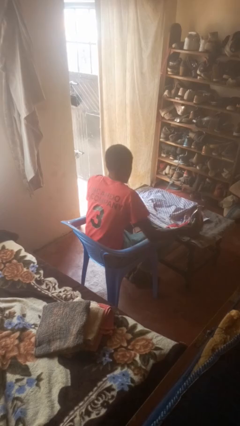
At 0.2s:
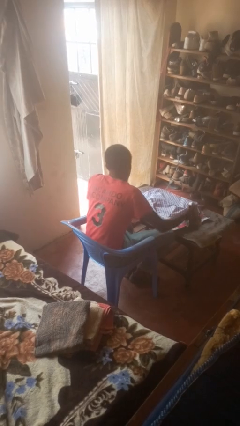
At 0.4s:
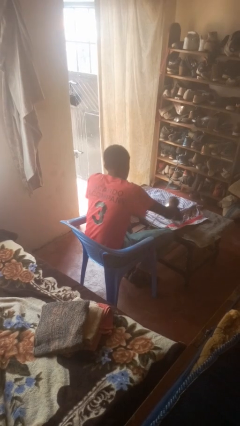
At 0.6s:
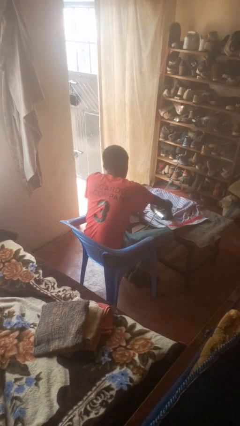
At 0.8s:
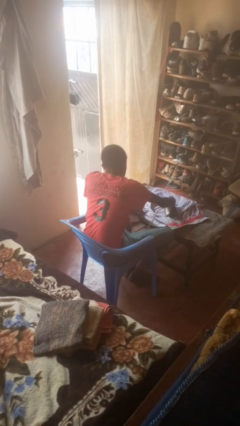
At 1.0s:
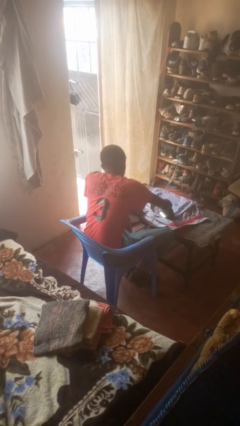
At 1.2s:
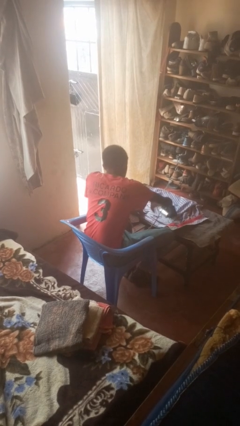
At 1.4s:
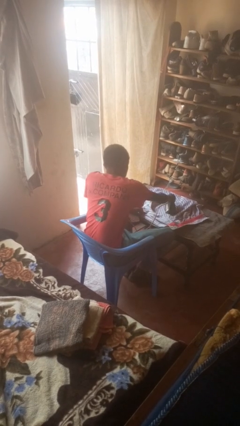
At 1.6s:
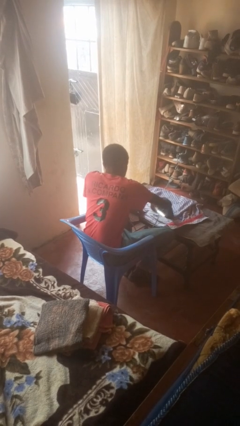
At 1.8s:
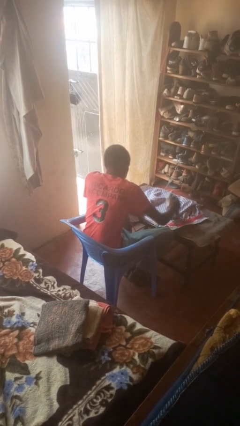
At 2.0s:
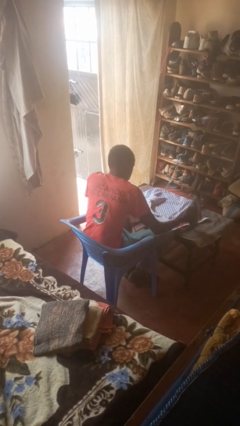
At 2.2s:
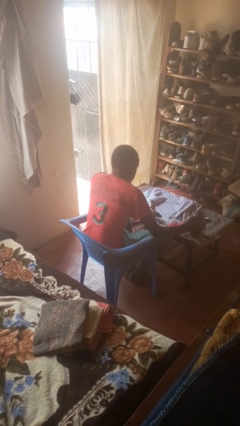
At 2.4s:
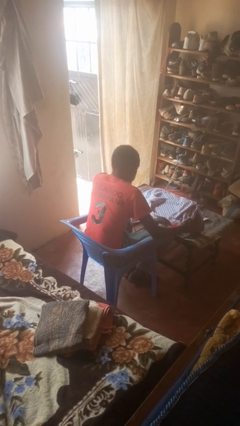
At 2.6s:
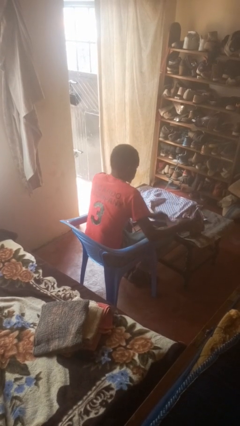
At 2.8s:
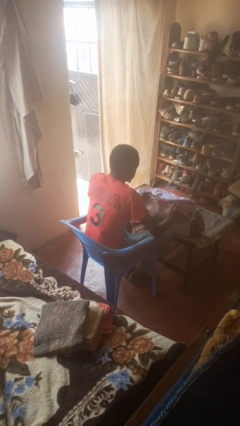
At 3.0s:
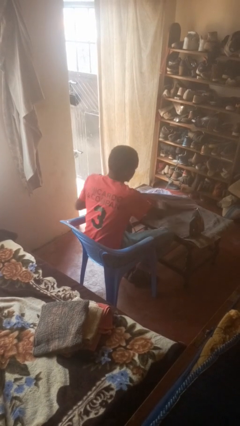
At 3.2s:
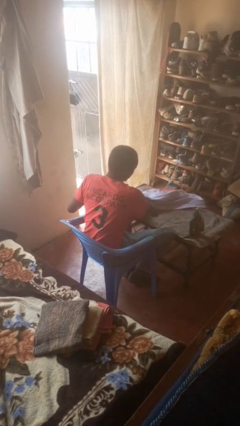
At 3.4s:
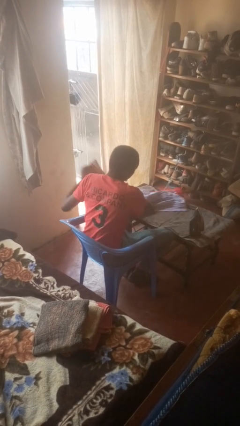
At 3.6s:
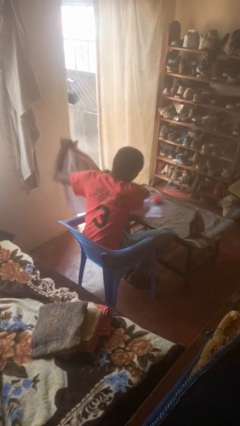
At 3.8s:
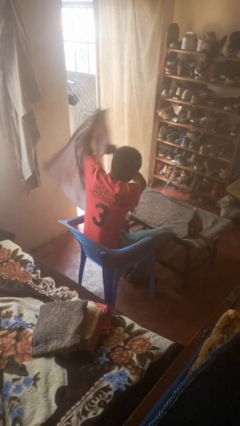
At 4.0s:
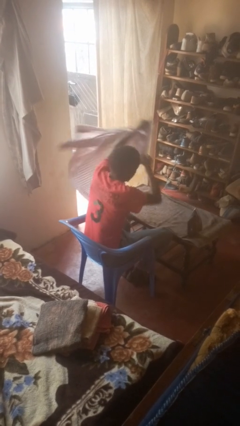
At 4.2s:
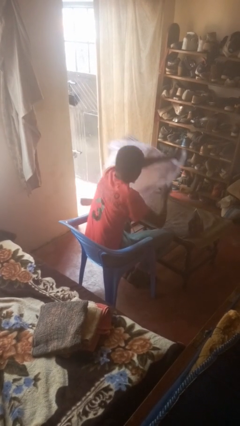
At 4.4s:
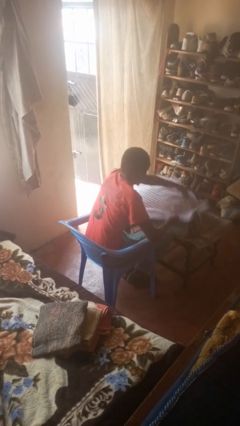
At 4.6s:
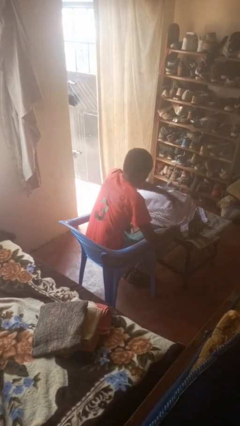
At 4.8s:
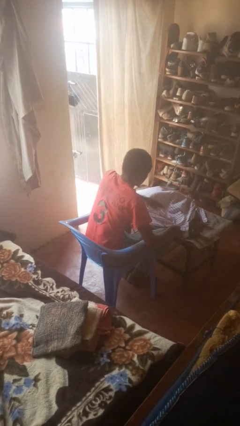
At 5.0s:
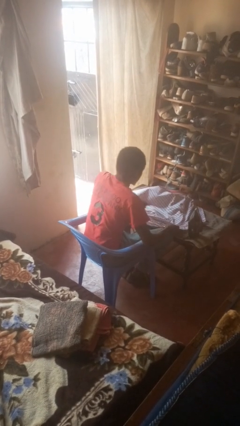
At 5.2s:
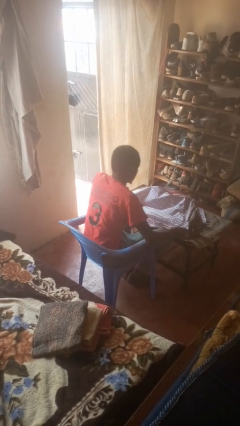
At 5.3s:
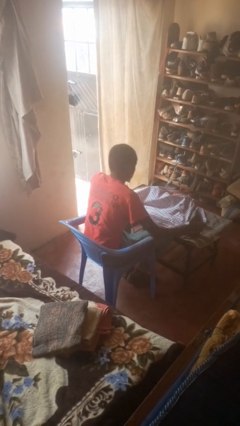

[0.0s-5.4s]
person irons clothes

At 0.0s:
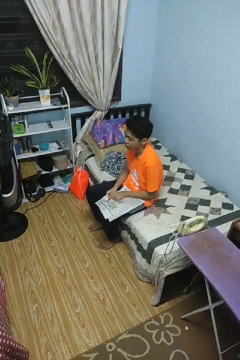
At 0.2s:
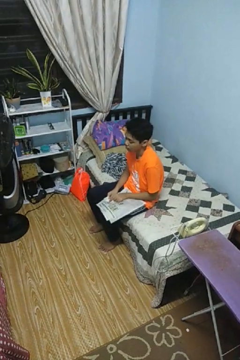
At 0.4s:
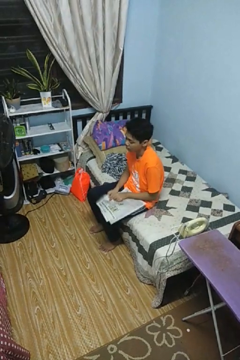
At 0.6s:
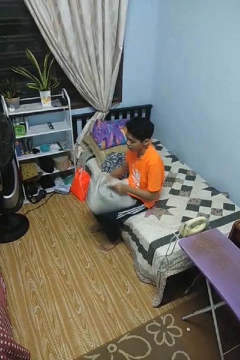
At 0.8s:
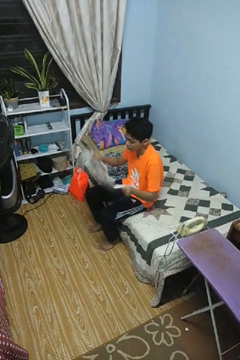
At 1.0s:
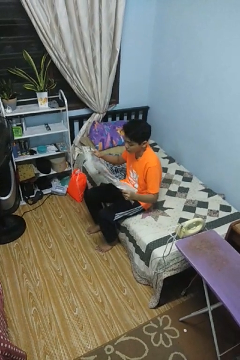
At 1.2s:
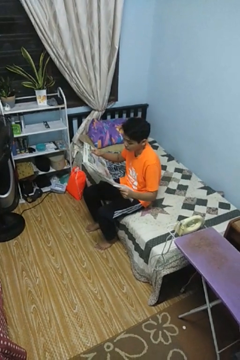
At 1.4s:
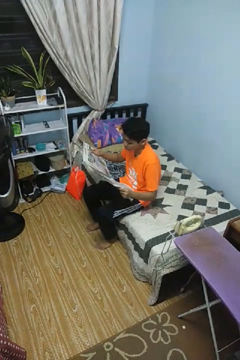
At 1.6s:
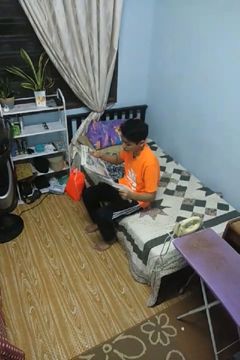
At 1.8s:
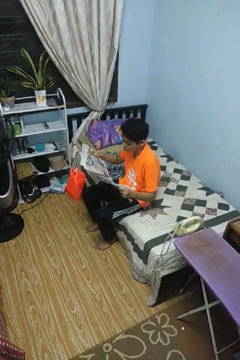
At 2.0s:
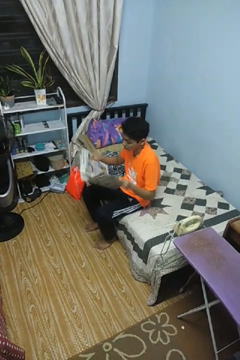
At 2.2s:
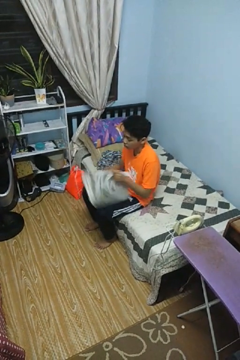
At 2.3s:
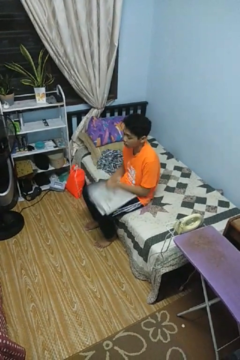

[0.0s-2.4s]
person reads newspaper

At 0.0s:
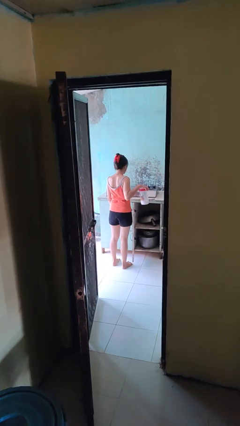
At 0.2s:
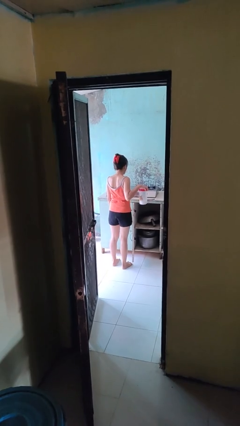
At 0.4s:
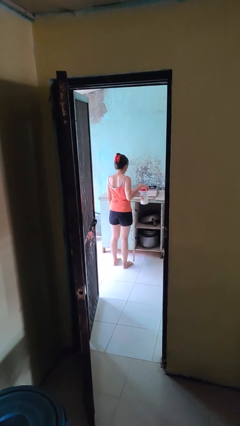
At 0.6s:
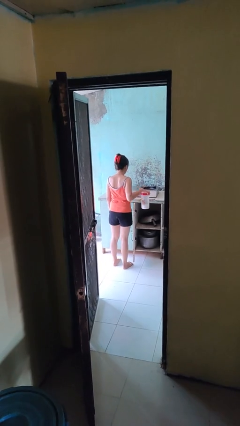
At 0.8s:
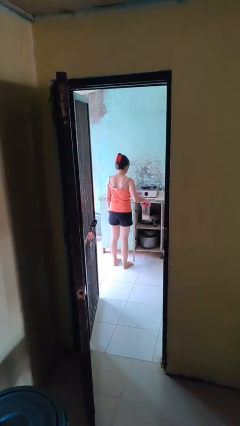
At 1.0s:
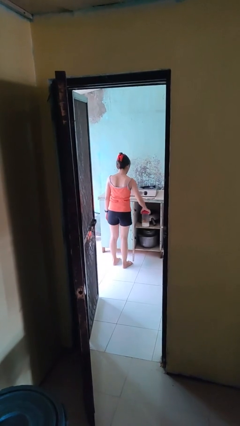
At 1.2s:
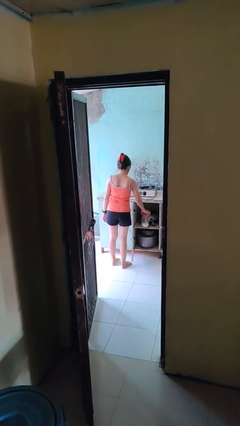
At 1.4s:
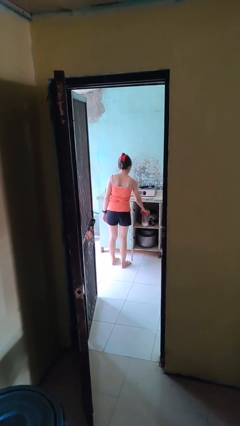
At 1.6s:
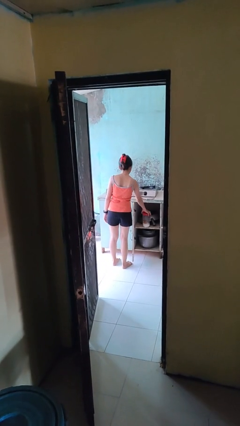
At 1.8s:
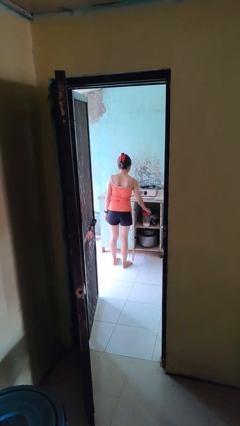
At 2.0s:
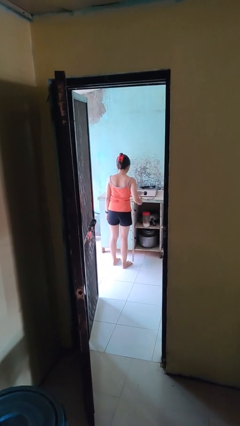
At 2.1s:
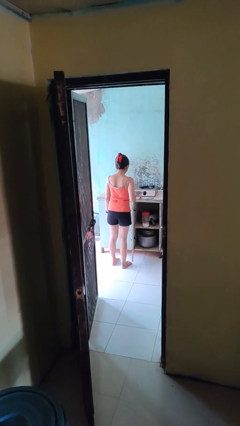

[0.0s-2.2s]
person puts down object into cabinet

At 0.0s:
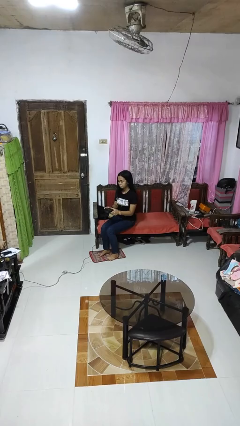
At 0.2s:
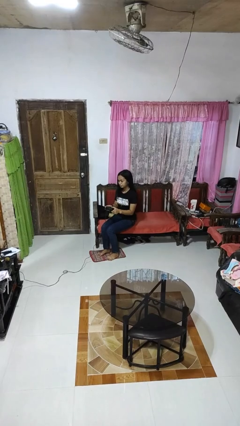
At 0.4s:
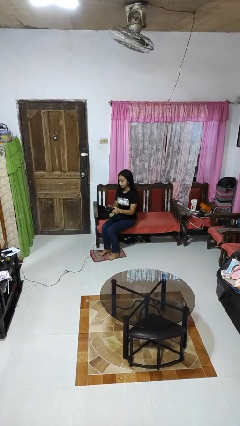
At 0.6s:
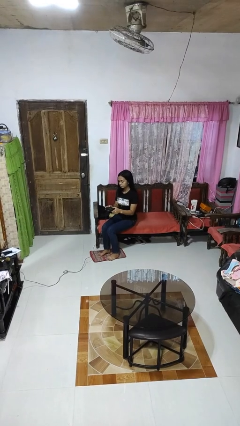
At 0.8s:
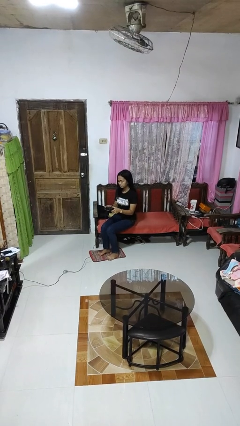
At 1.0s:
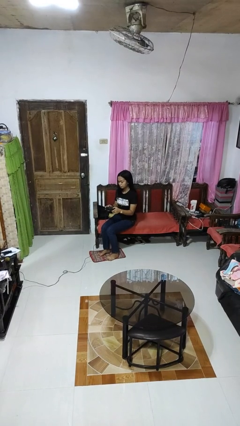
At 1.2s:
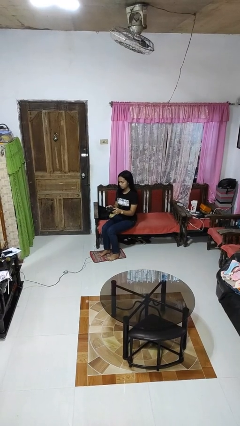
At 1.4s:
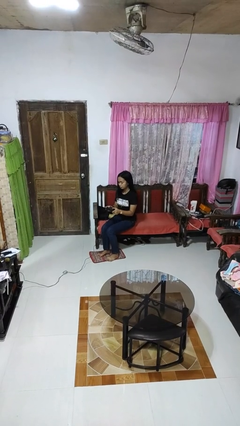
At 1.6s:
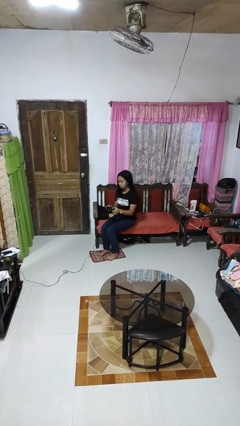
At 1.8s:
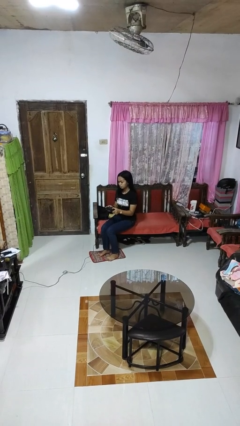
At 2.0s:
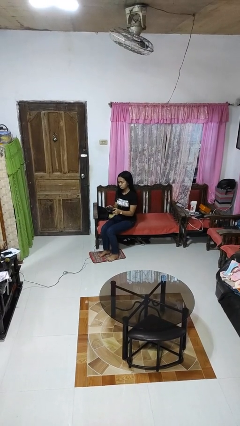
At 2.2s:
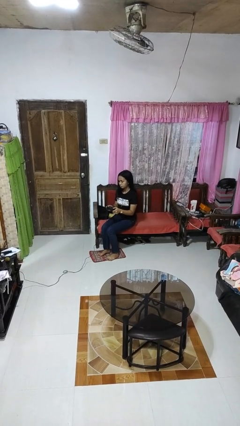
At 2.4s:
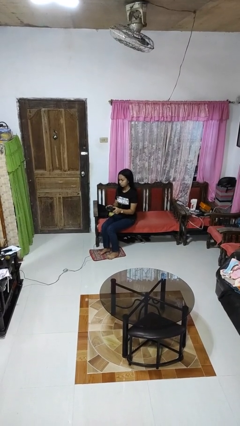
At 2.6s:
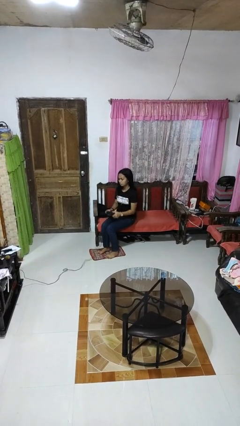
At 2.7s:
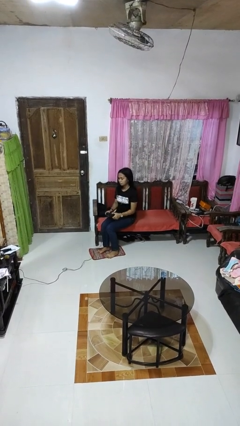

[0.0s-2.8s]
person interacts with handheld game

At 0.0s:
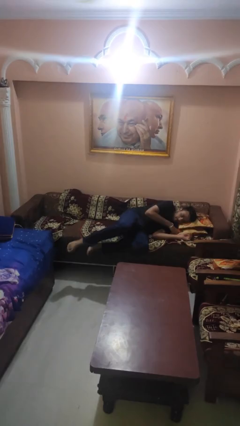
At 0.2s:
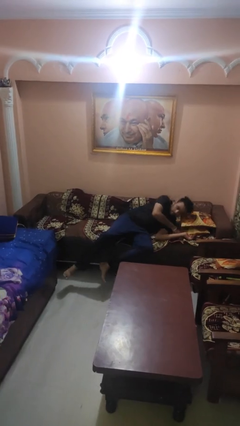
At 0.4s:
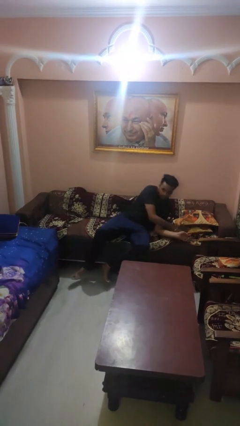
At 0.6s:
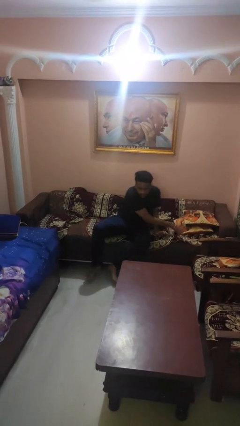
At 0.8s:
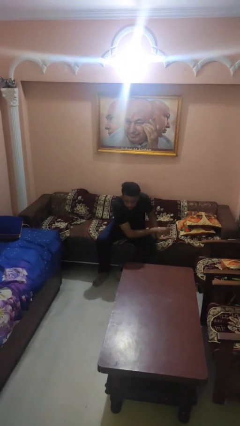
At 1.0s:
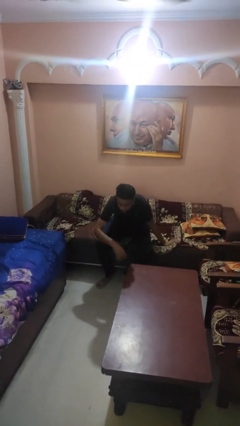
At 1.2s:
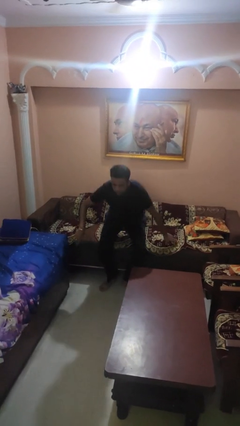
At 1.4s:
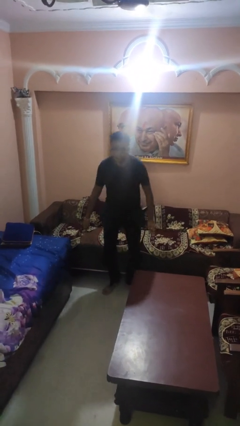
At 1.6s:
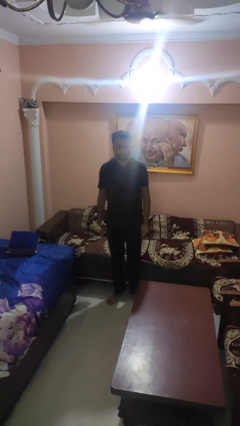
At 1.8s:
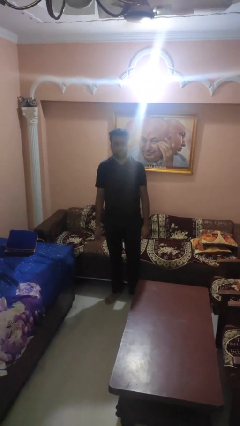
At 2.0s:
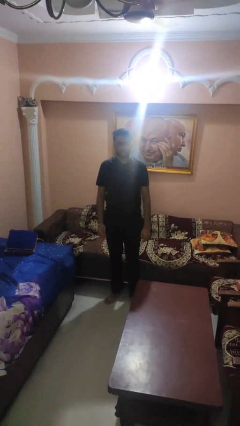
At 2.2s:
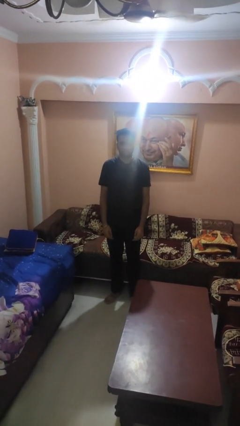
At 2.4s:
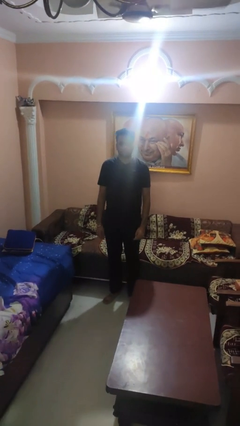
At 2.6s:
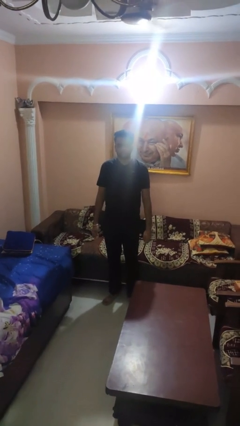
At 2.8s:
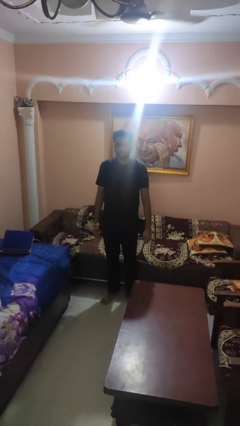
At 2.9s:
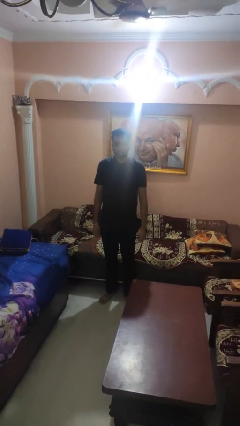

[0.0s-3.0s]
person stands up

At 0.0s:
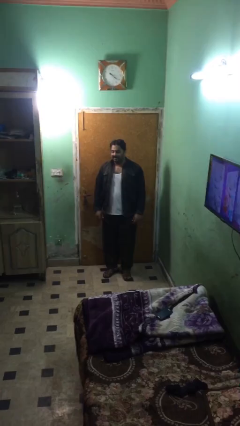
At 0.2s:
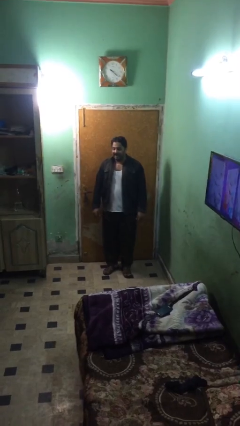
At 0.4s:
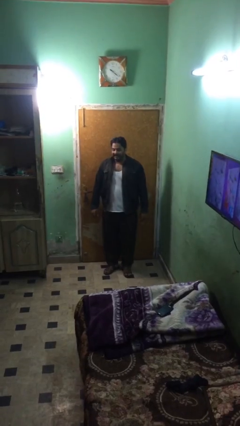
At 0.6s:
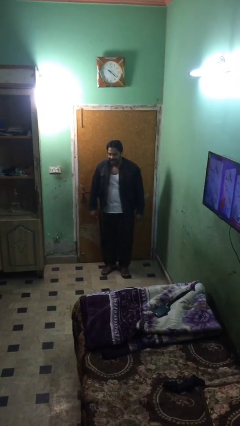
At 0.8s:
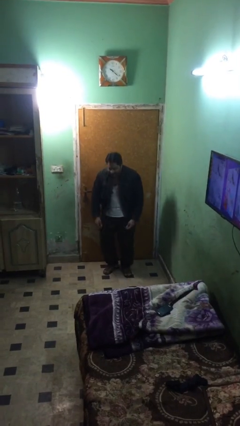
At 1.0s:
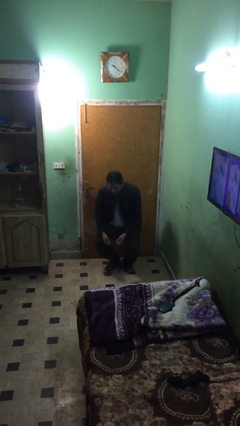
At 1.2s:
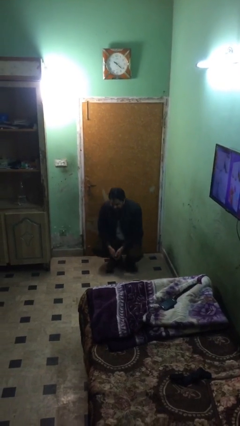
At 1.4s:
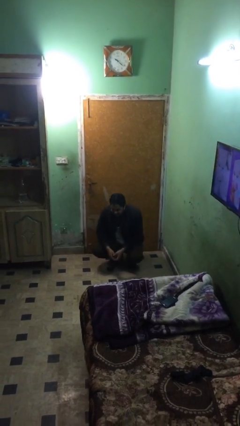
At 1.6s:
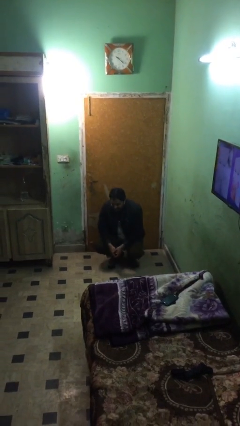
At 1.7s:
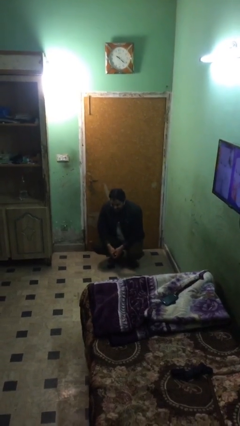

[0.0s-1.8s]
person sits down

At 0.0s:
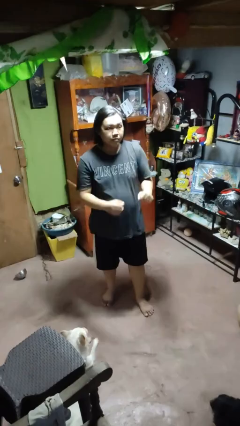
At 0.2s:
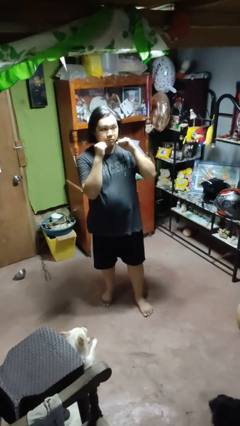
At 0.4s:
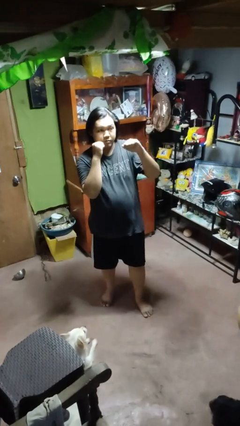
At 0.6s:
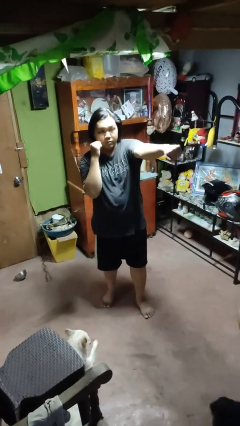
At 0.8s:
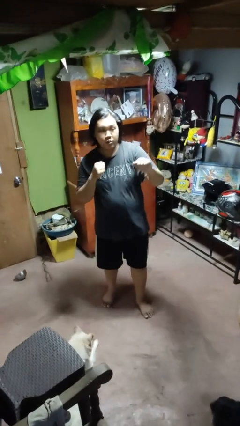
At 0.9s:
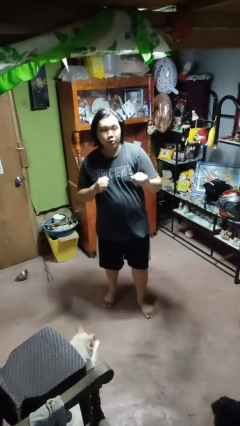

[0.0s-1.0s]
person punches
